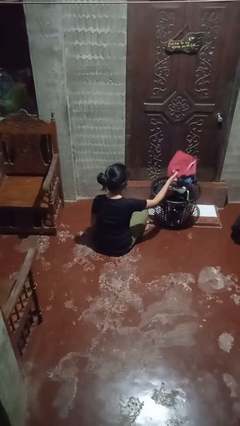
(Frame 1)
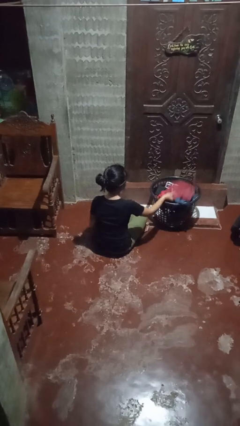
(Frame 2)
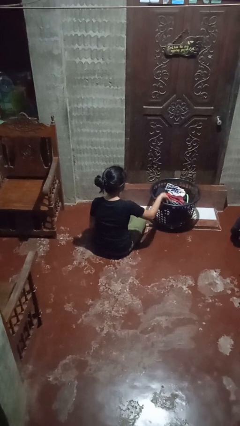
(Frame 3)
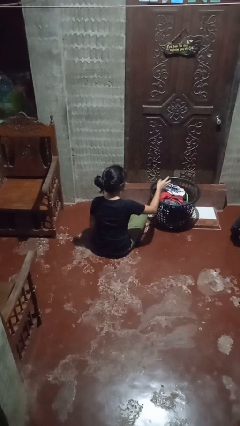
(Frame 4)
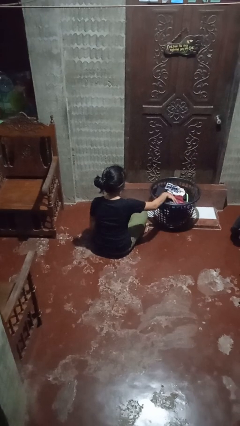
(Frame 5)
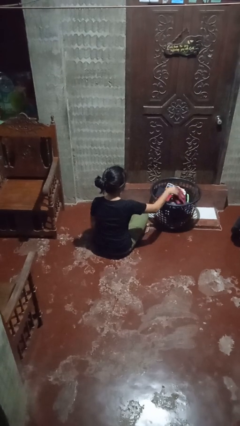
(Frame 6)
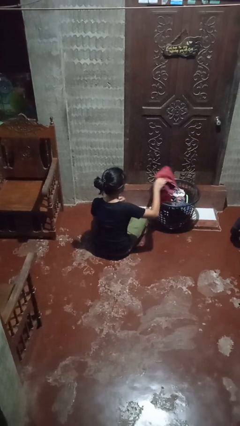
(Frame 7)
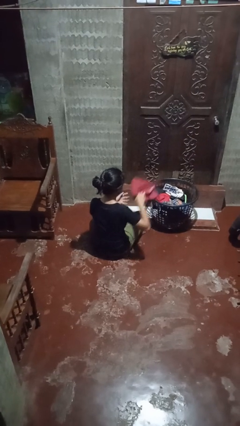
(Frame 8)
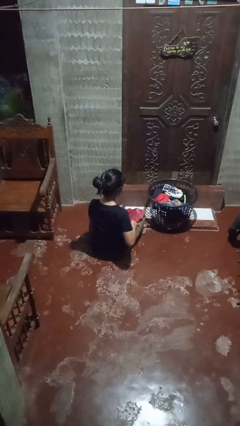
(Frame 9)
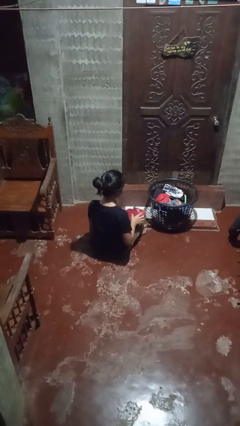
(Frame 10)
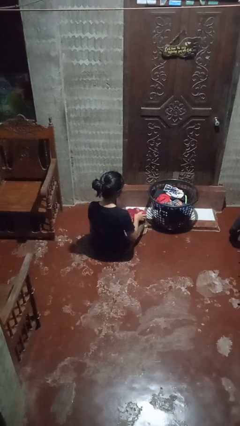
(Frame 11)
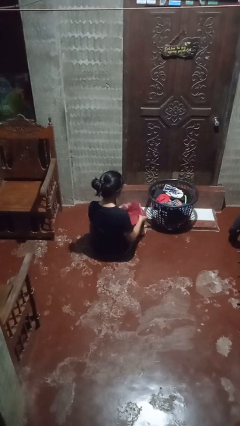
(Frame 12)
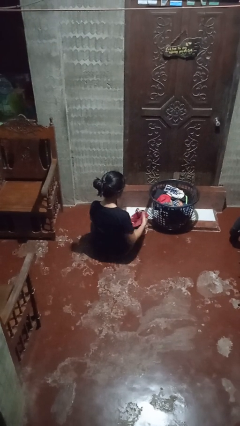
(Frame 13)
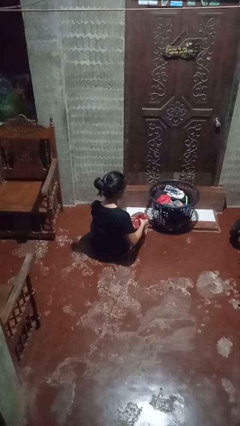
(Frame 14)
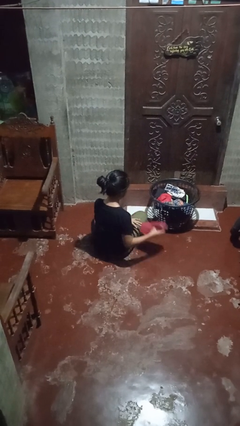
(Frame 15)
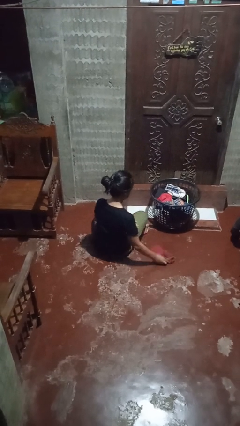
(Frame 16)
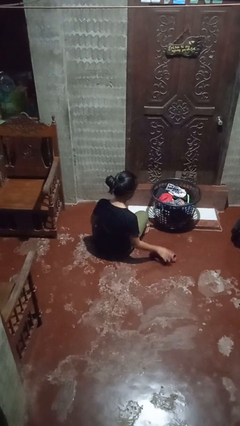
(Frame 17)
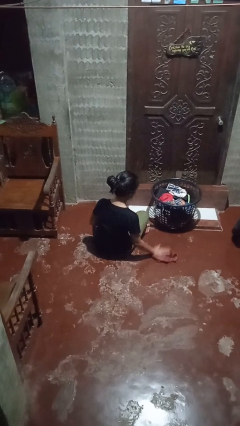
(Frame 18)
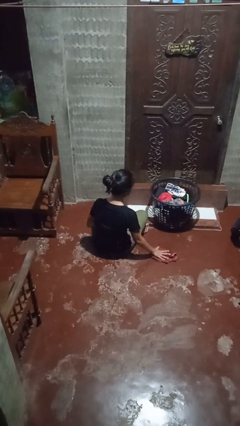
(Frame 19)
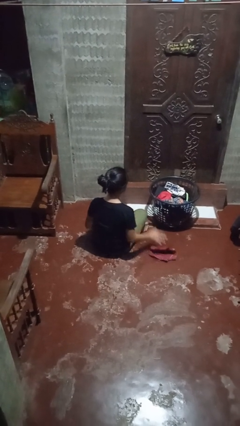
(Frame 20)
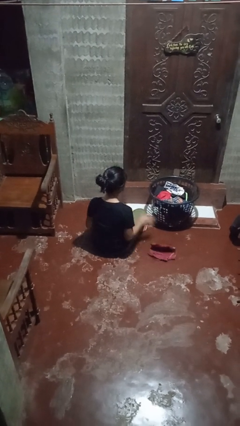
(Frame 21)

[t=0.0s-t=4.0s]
person folds pants

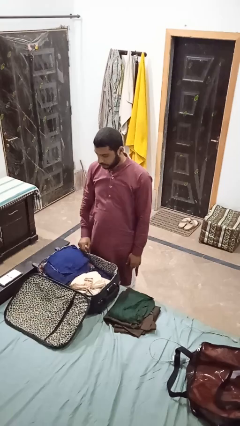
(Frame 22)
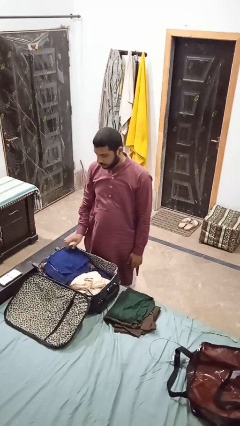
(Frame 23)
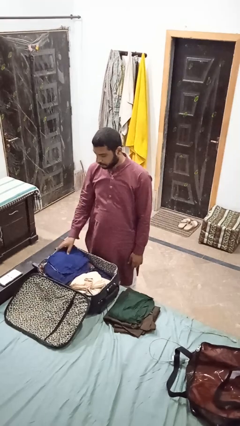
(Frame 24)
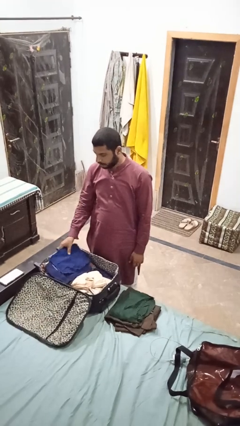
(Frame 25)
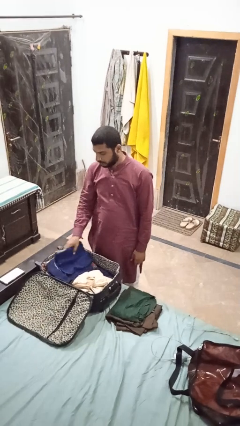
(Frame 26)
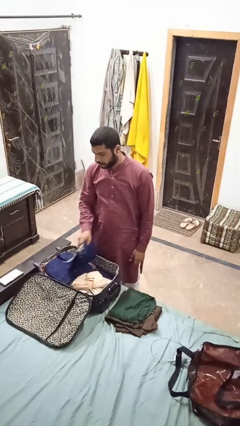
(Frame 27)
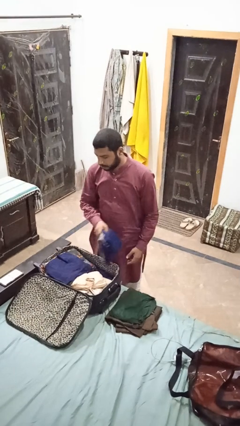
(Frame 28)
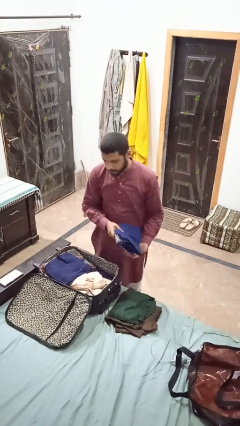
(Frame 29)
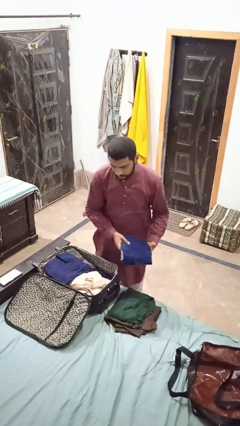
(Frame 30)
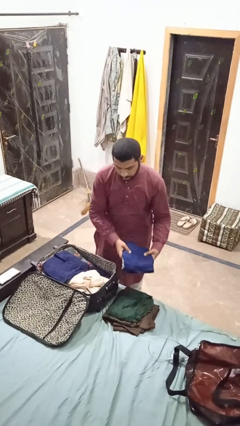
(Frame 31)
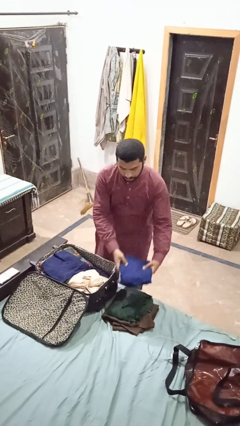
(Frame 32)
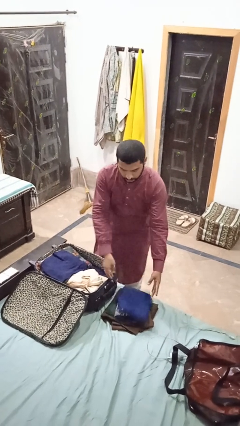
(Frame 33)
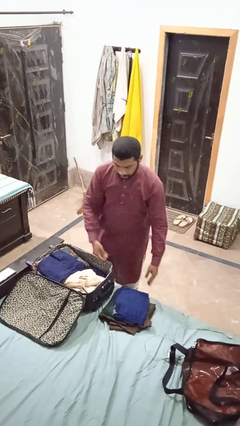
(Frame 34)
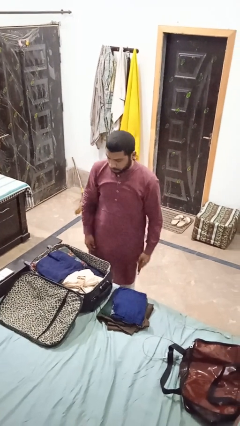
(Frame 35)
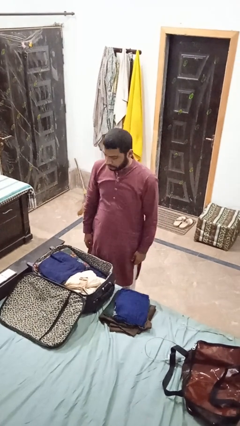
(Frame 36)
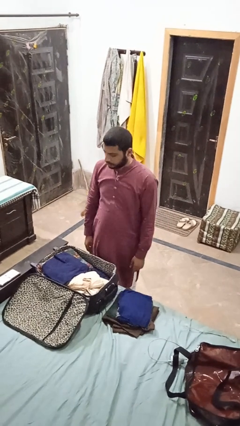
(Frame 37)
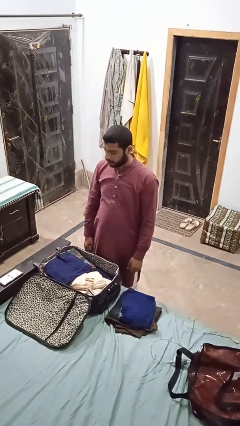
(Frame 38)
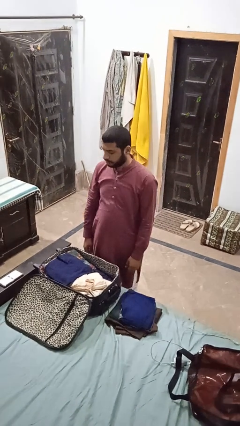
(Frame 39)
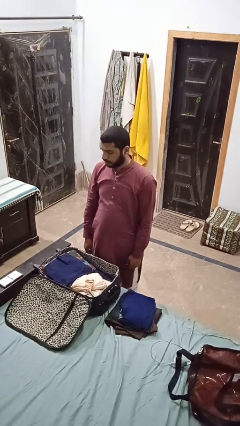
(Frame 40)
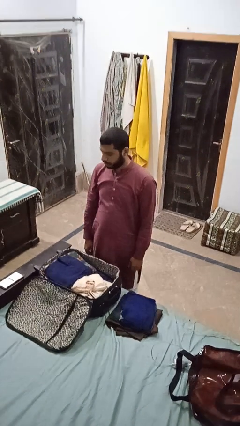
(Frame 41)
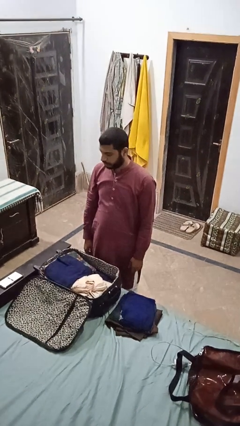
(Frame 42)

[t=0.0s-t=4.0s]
person unloads clothes from suitcase

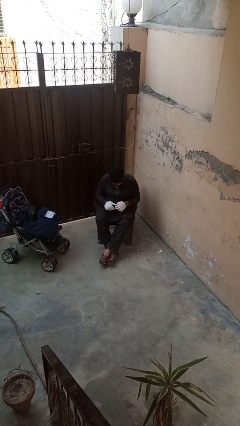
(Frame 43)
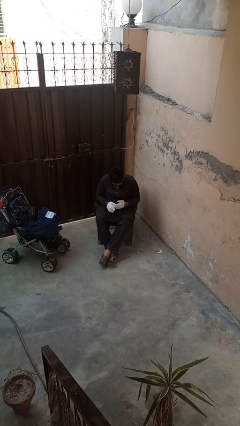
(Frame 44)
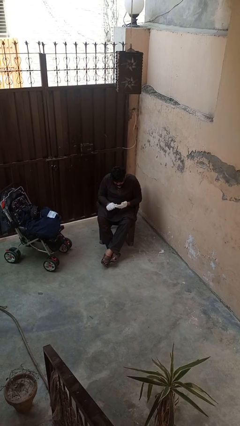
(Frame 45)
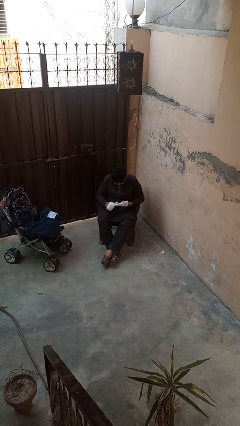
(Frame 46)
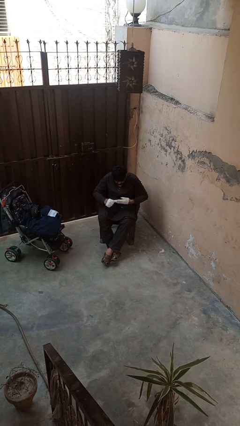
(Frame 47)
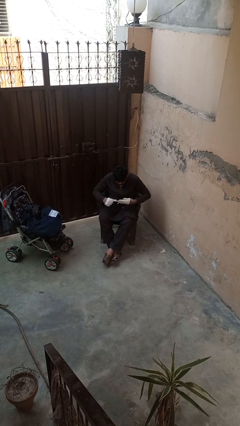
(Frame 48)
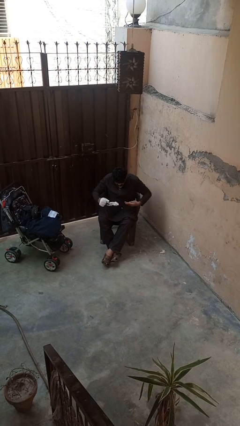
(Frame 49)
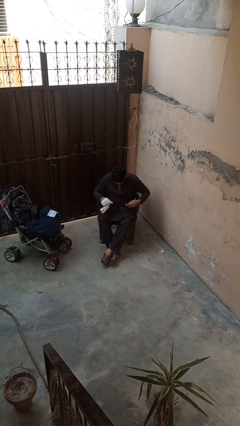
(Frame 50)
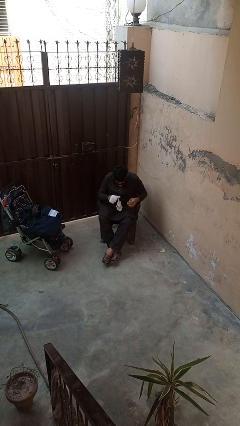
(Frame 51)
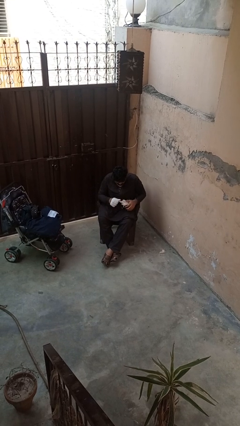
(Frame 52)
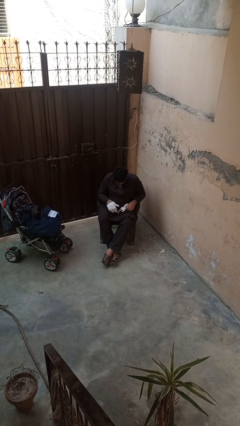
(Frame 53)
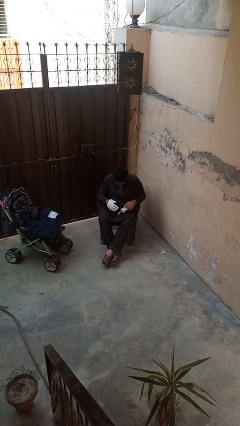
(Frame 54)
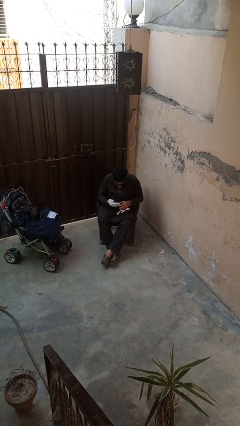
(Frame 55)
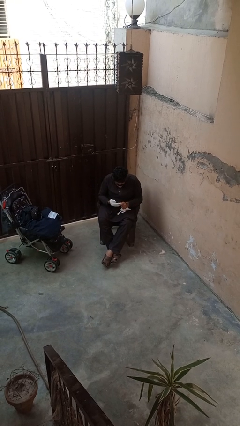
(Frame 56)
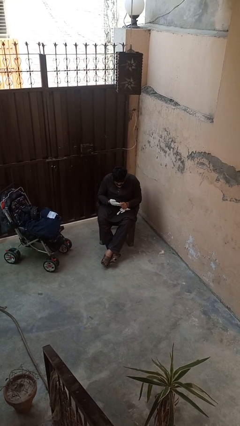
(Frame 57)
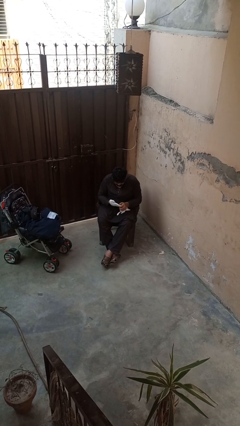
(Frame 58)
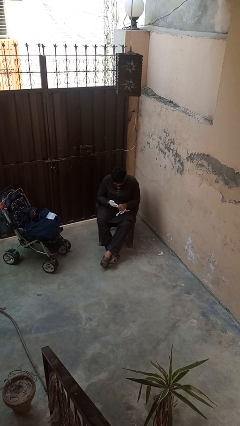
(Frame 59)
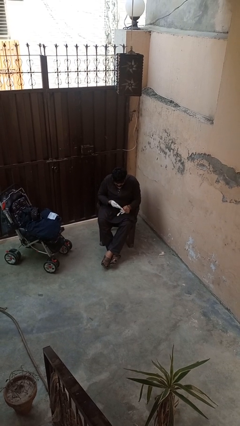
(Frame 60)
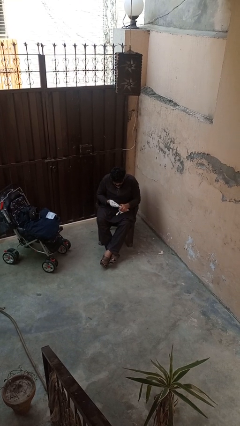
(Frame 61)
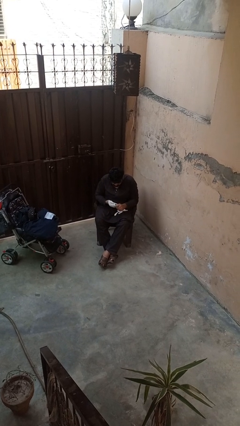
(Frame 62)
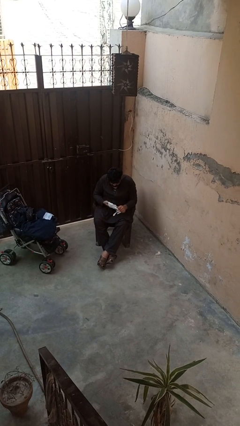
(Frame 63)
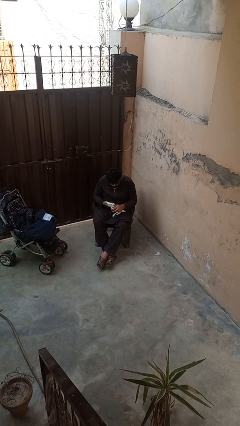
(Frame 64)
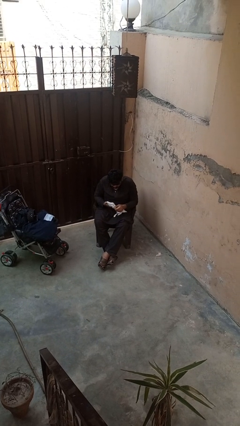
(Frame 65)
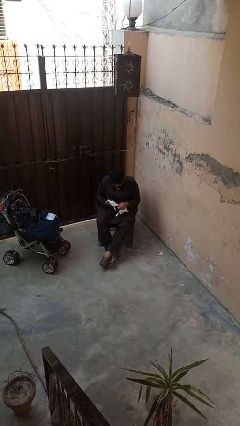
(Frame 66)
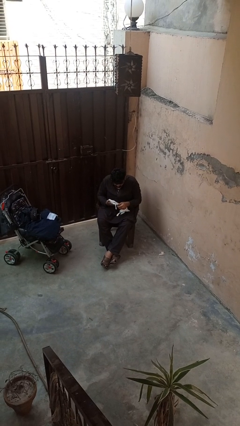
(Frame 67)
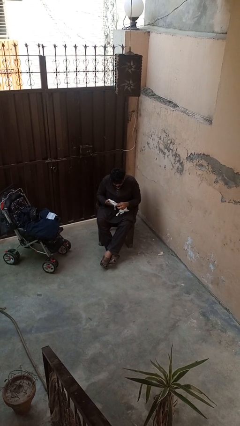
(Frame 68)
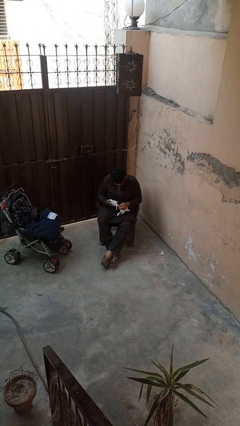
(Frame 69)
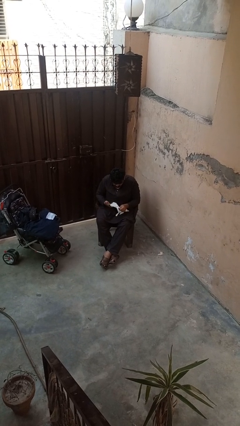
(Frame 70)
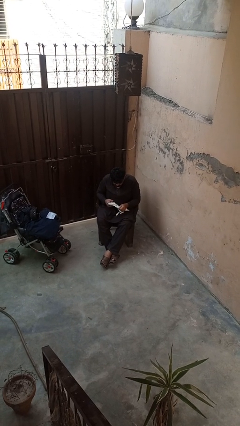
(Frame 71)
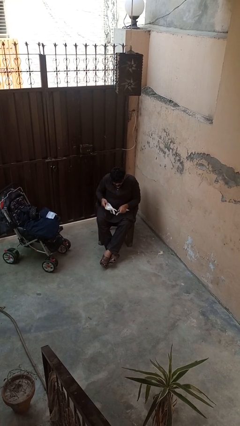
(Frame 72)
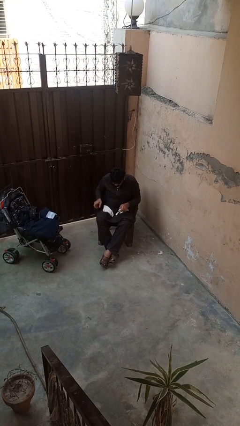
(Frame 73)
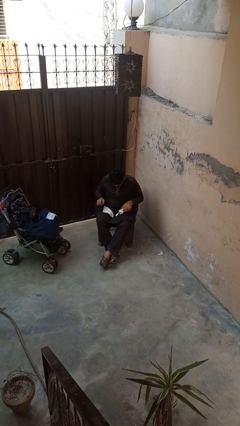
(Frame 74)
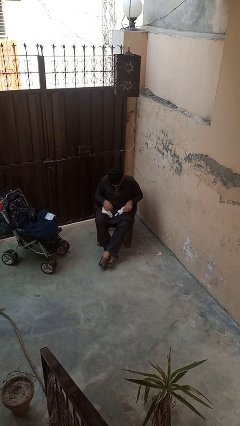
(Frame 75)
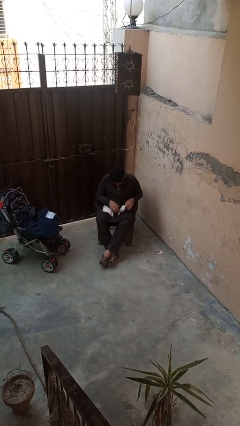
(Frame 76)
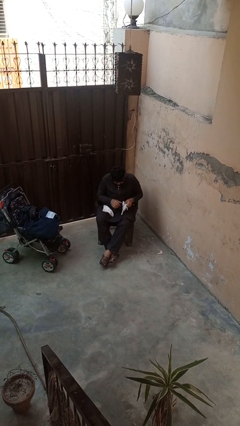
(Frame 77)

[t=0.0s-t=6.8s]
person takes off gloves

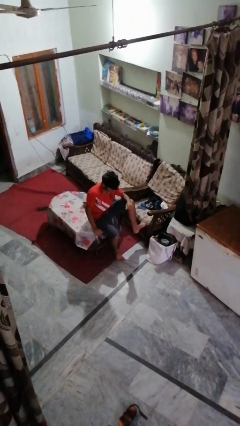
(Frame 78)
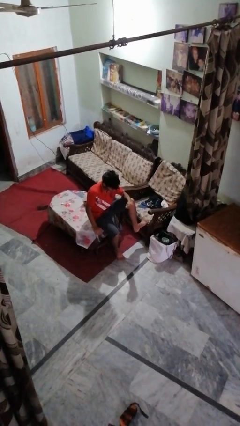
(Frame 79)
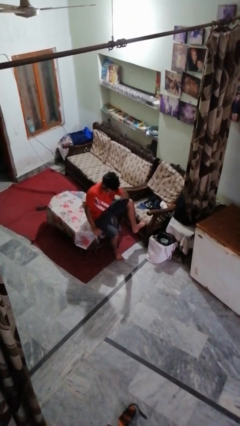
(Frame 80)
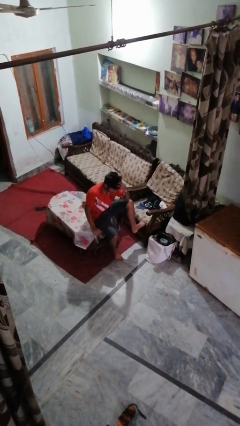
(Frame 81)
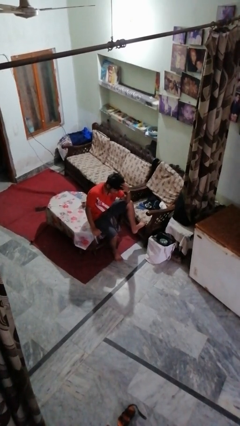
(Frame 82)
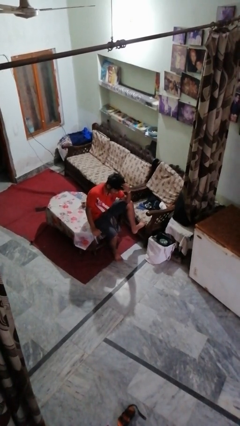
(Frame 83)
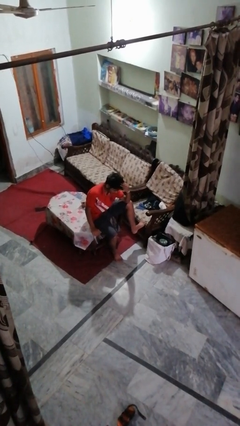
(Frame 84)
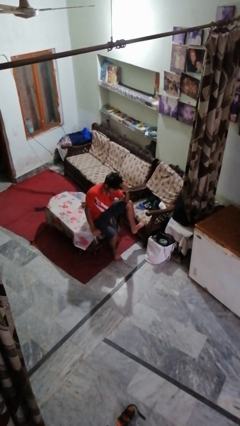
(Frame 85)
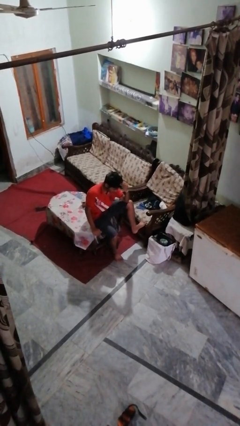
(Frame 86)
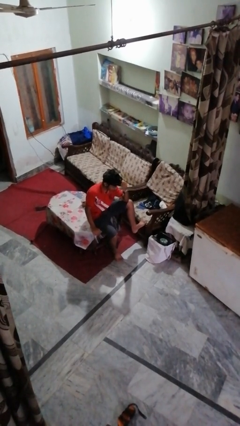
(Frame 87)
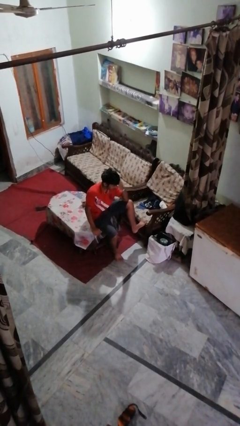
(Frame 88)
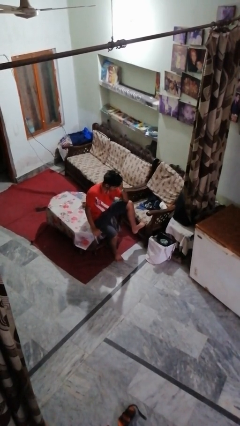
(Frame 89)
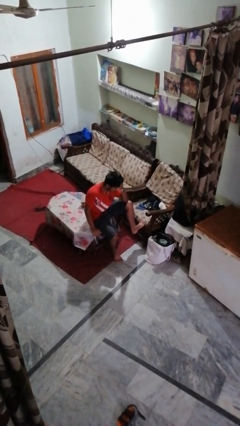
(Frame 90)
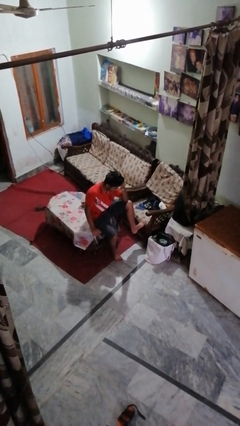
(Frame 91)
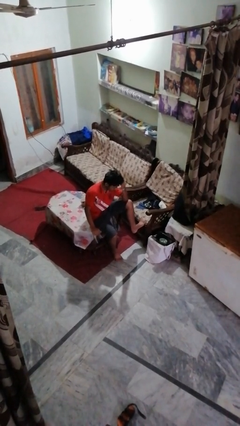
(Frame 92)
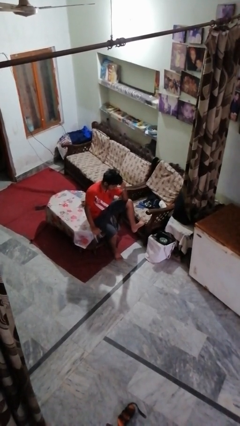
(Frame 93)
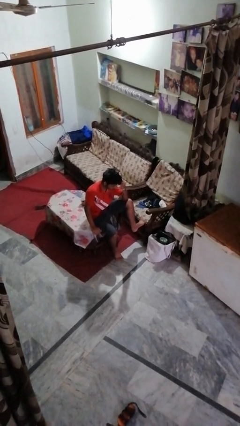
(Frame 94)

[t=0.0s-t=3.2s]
person strokes hair
